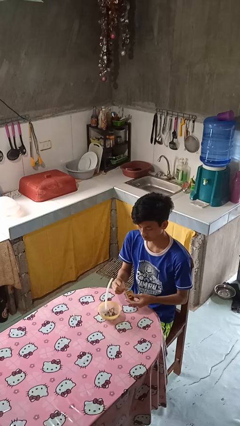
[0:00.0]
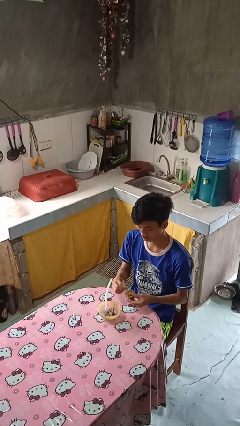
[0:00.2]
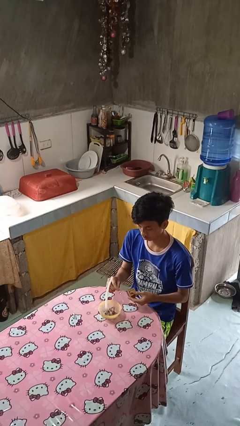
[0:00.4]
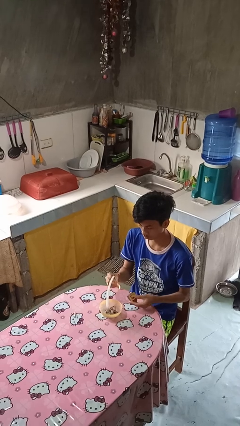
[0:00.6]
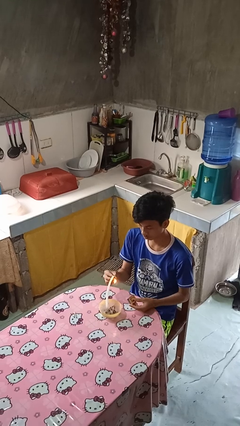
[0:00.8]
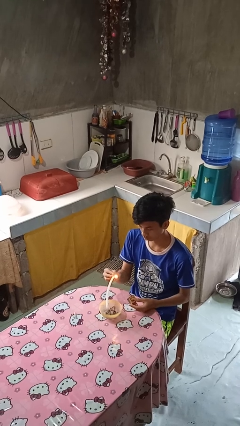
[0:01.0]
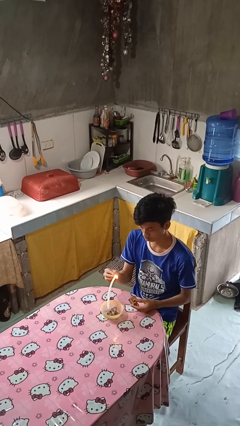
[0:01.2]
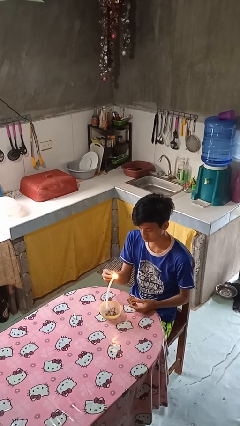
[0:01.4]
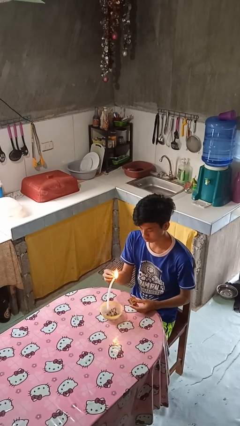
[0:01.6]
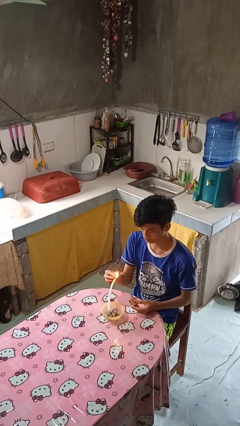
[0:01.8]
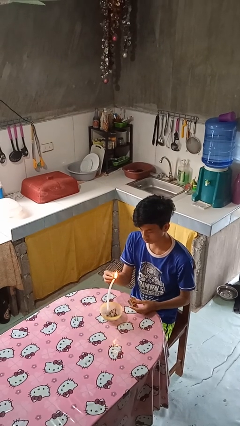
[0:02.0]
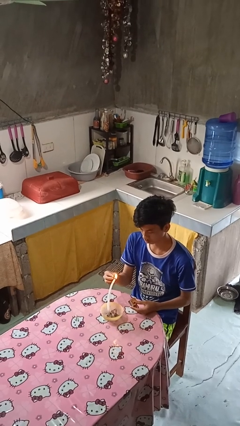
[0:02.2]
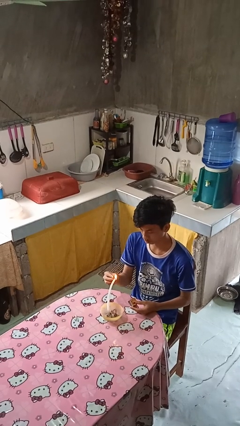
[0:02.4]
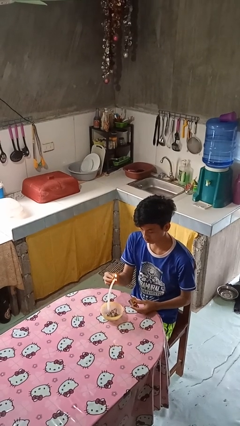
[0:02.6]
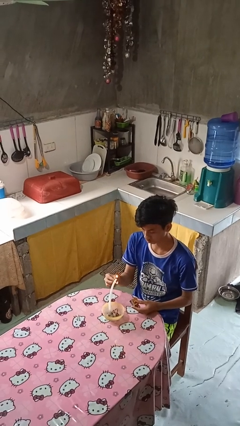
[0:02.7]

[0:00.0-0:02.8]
person lights candle

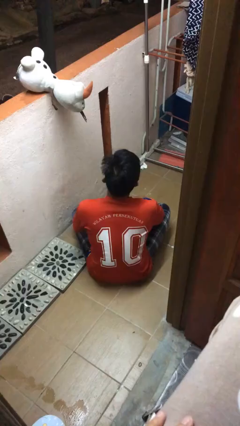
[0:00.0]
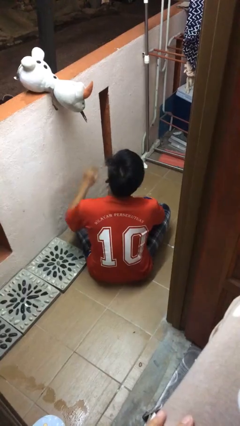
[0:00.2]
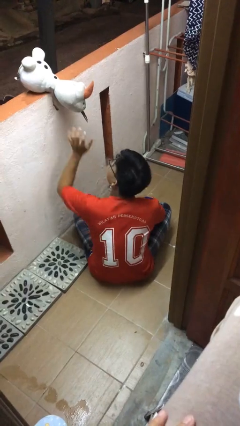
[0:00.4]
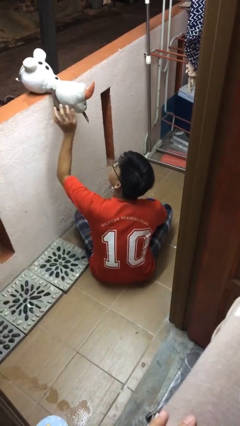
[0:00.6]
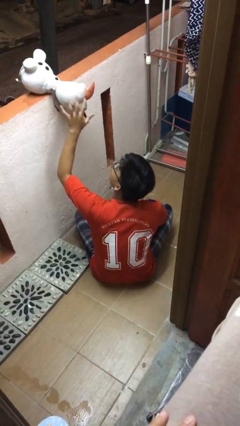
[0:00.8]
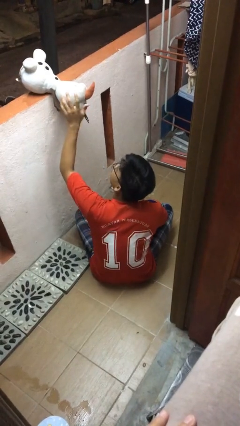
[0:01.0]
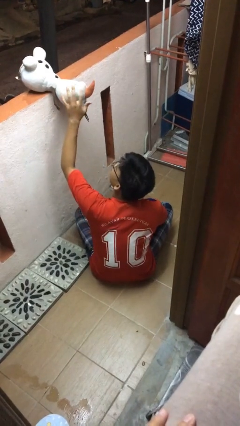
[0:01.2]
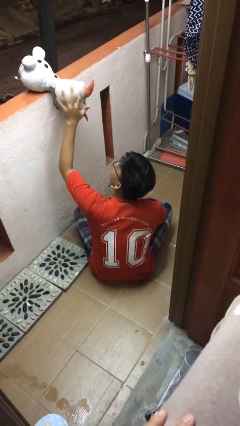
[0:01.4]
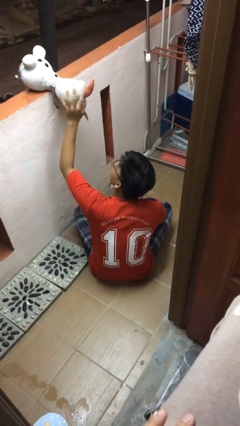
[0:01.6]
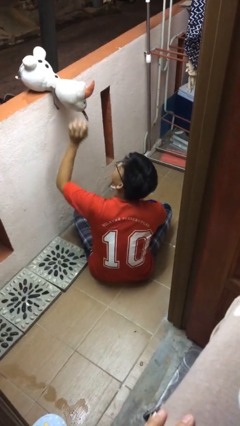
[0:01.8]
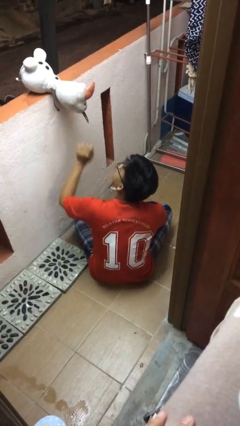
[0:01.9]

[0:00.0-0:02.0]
person waves hand over object

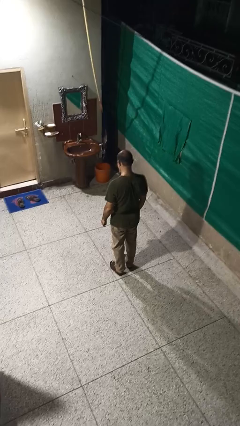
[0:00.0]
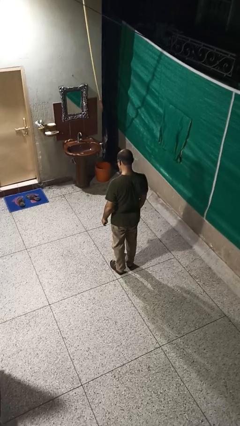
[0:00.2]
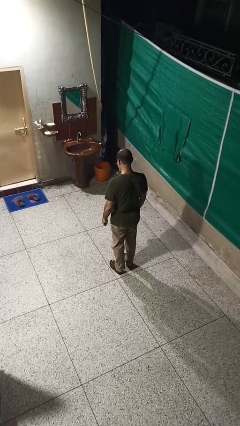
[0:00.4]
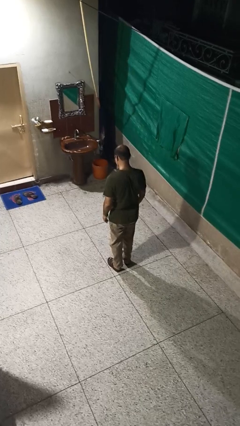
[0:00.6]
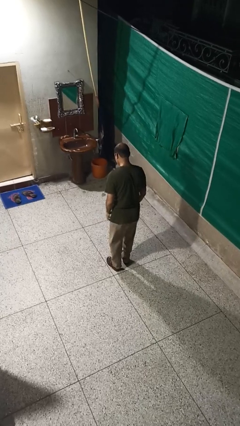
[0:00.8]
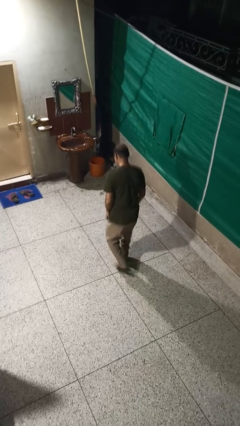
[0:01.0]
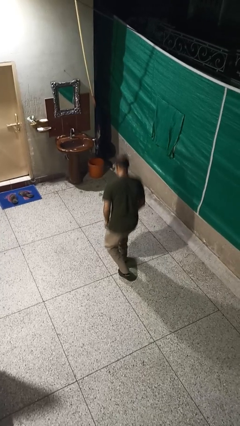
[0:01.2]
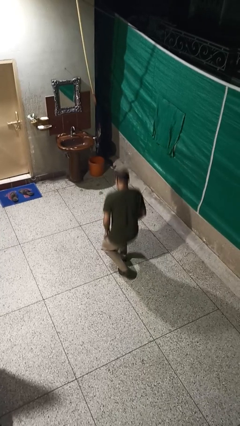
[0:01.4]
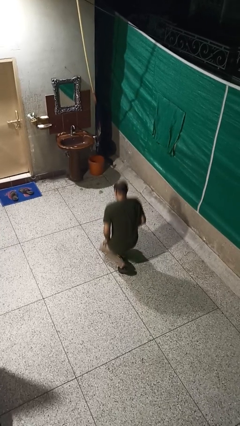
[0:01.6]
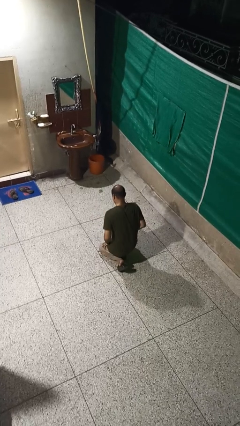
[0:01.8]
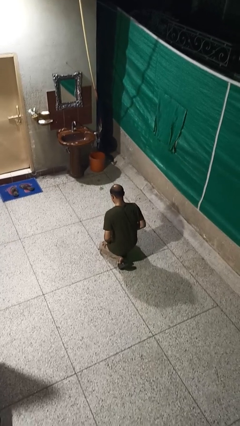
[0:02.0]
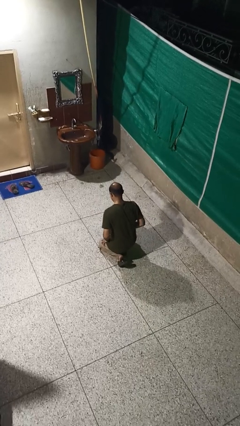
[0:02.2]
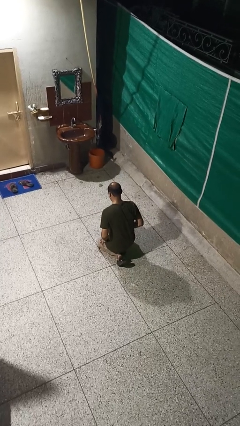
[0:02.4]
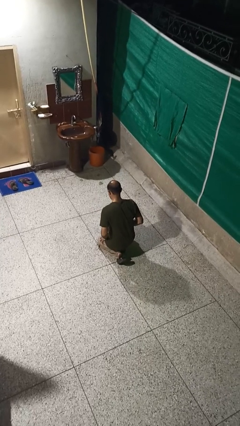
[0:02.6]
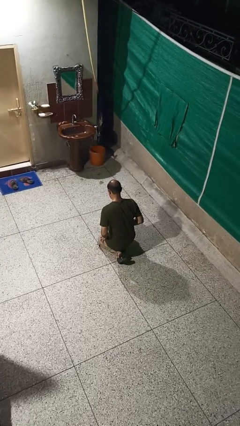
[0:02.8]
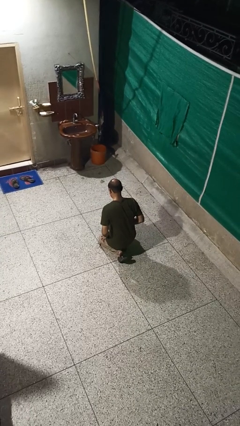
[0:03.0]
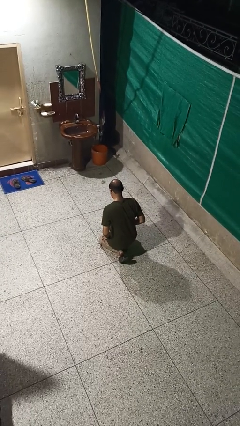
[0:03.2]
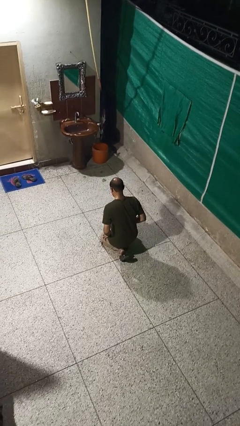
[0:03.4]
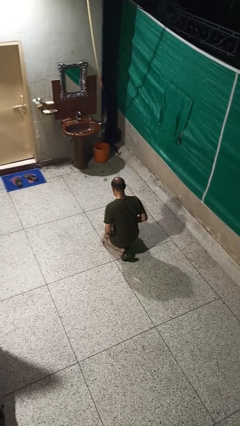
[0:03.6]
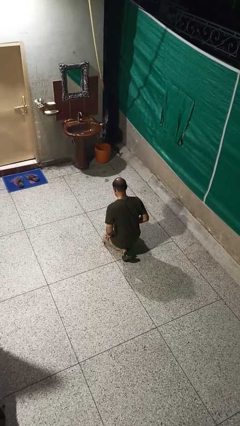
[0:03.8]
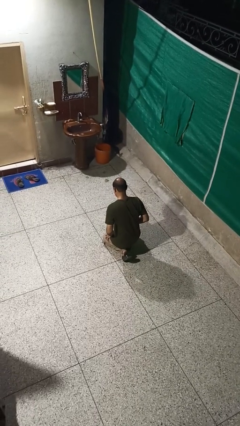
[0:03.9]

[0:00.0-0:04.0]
person kneels

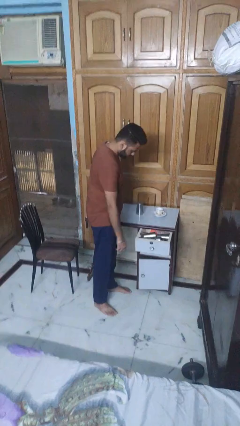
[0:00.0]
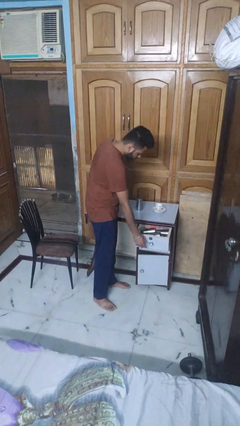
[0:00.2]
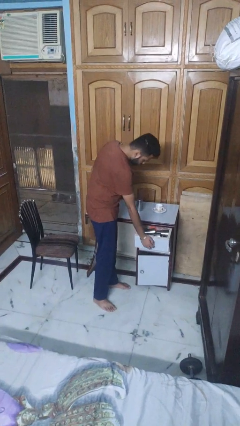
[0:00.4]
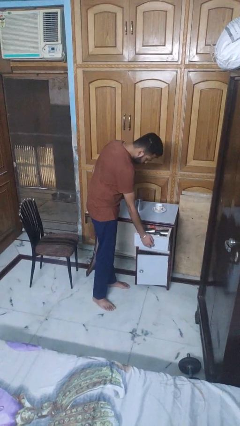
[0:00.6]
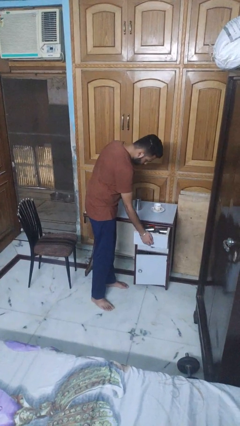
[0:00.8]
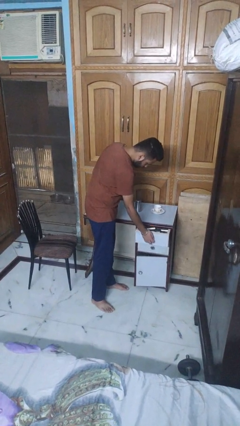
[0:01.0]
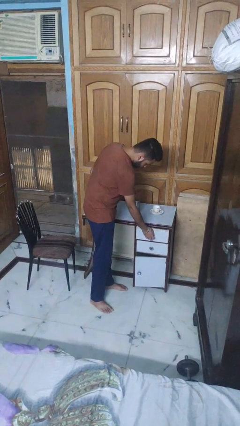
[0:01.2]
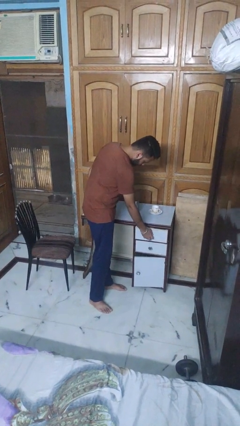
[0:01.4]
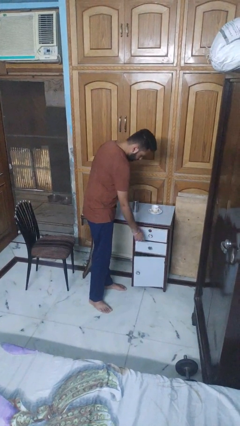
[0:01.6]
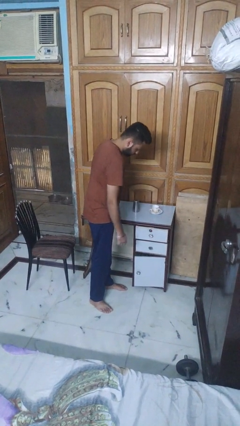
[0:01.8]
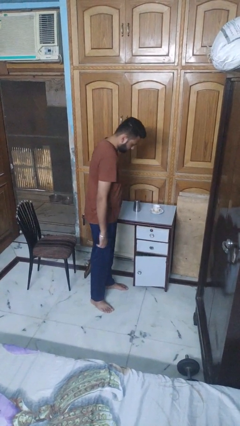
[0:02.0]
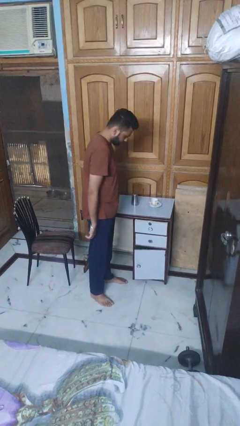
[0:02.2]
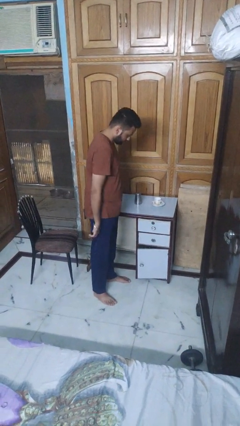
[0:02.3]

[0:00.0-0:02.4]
person closes kitchen drawer

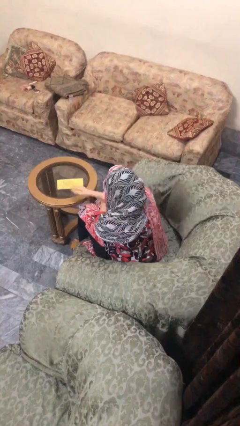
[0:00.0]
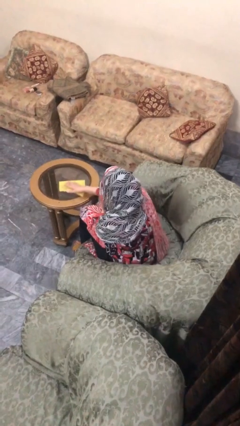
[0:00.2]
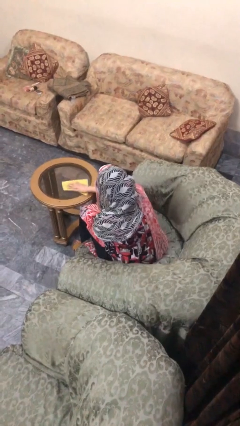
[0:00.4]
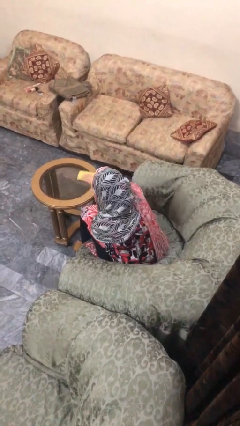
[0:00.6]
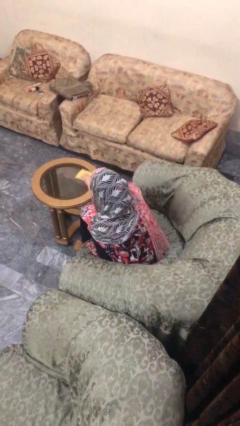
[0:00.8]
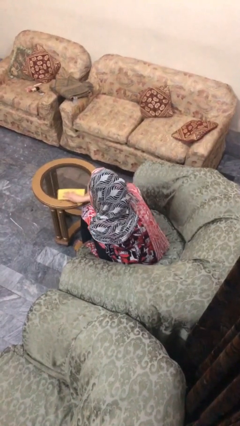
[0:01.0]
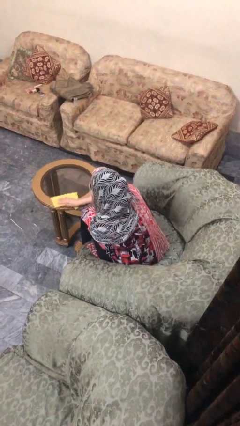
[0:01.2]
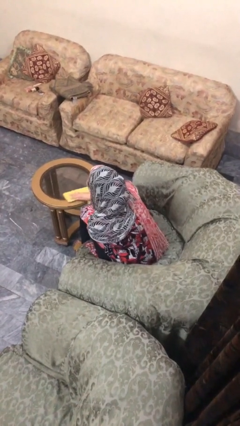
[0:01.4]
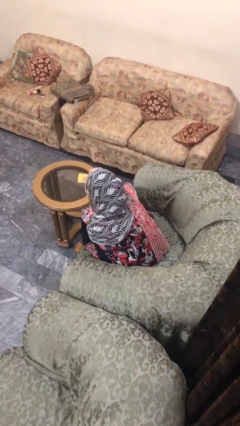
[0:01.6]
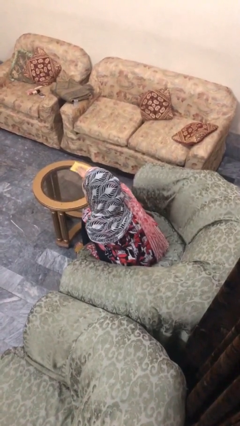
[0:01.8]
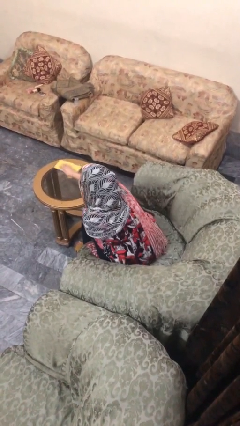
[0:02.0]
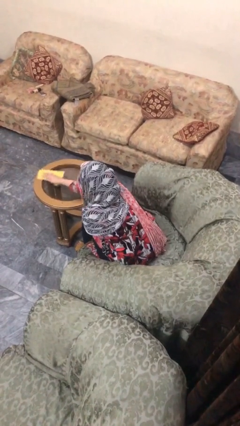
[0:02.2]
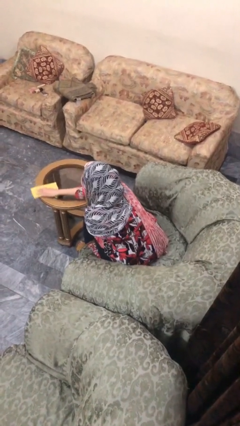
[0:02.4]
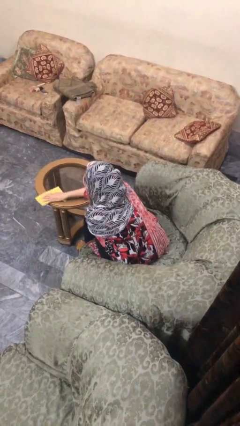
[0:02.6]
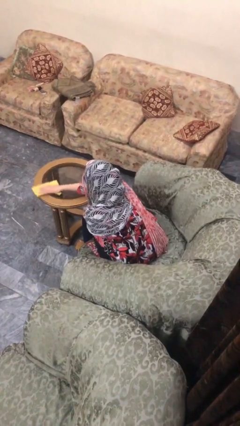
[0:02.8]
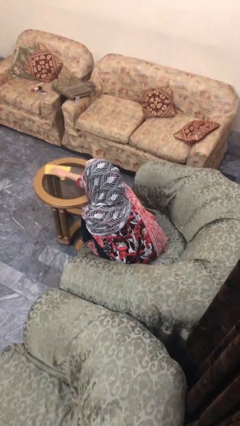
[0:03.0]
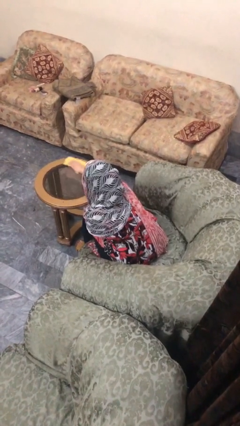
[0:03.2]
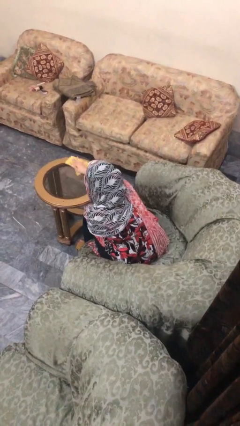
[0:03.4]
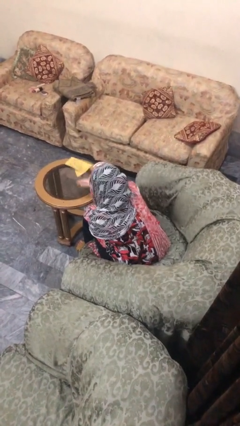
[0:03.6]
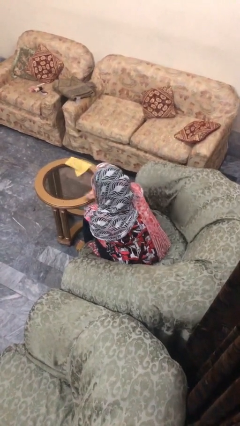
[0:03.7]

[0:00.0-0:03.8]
person cleans table with rag

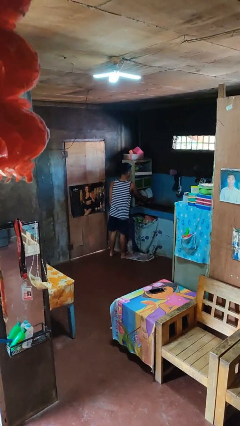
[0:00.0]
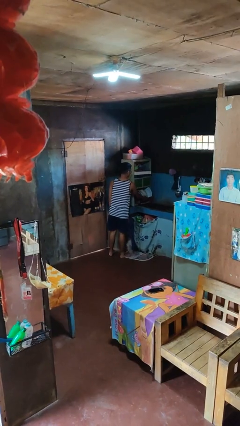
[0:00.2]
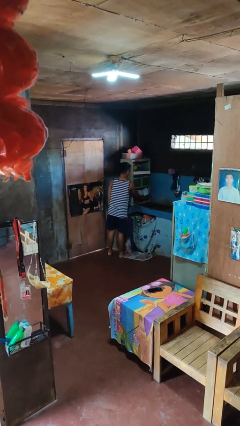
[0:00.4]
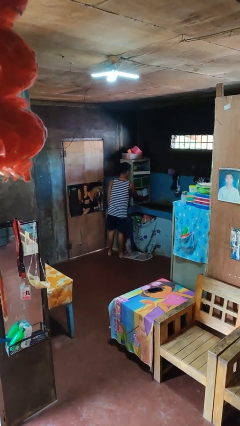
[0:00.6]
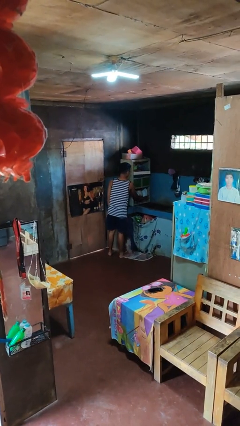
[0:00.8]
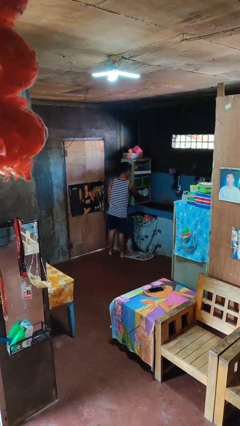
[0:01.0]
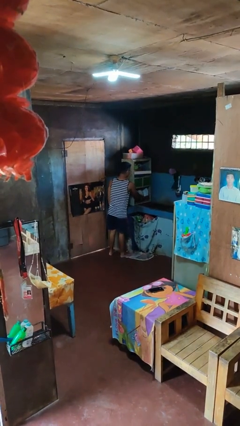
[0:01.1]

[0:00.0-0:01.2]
person closes dishwasher

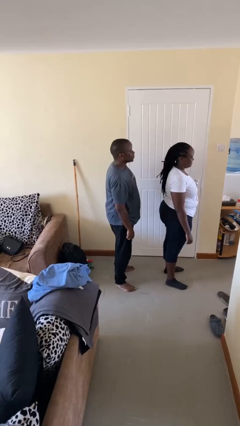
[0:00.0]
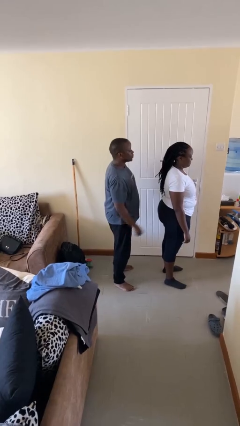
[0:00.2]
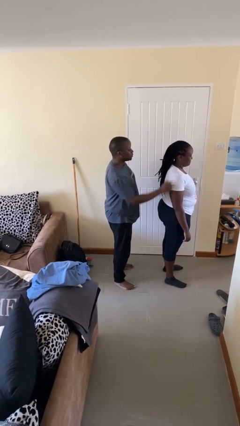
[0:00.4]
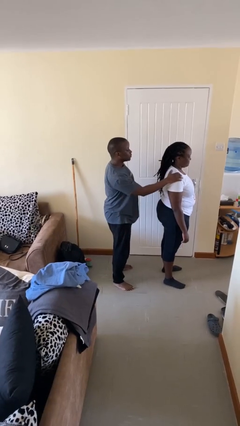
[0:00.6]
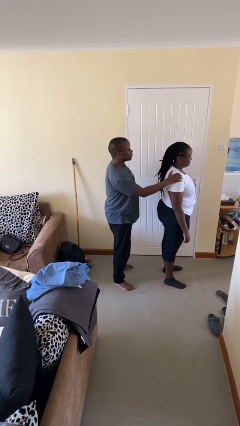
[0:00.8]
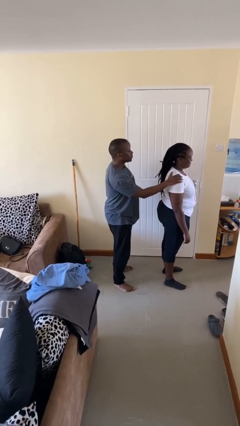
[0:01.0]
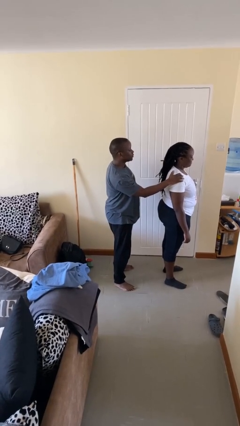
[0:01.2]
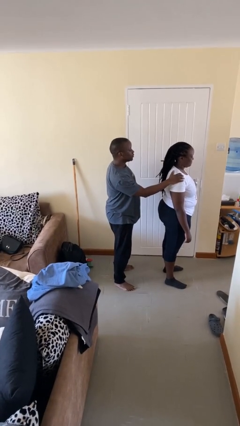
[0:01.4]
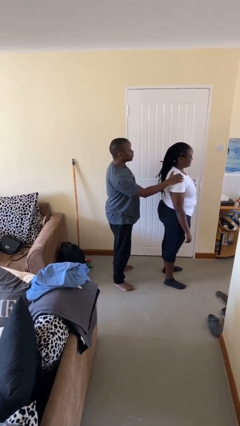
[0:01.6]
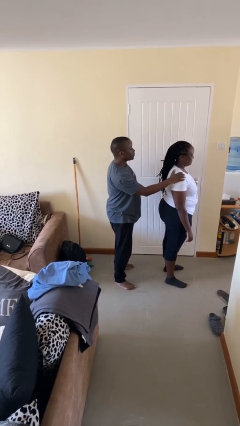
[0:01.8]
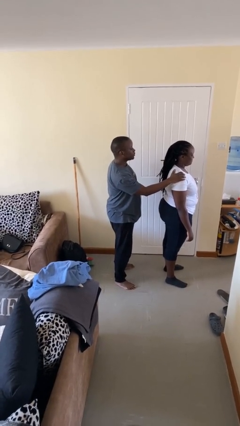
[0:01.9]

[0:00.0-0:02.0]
person grabs person by shoulder
